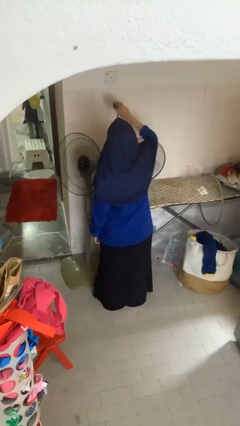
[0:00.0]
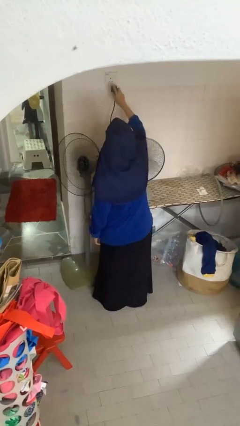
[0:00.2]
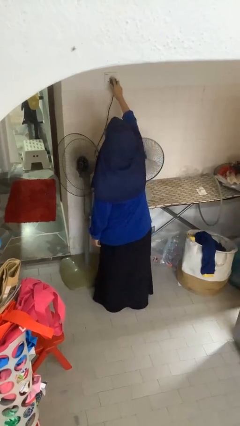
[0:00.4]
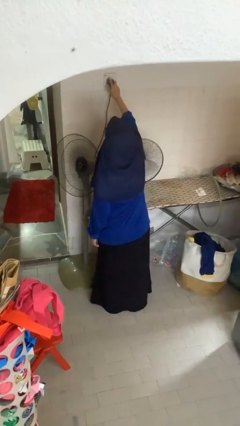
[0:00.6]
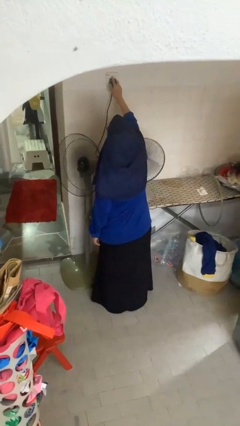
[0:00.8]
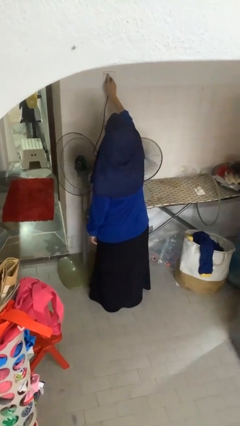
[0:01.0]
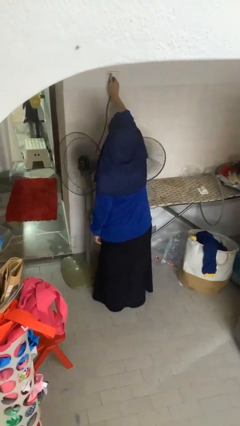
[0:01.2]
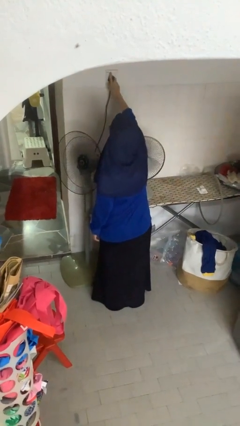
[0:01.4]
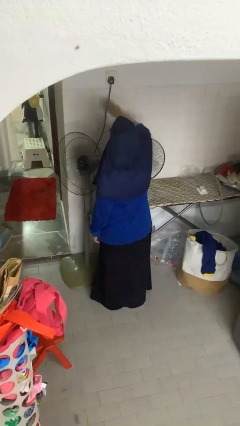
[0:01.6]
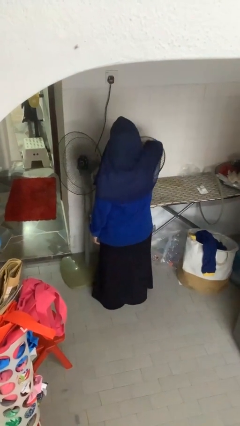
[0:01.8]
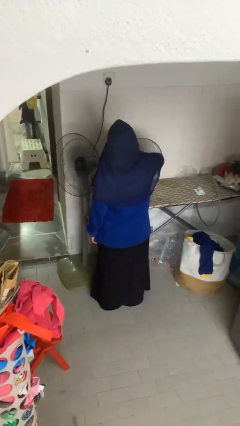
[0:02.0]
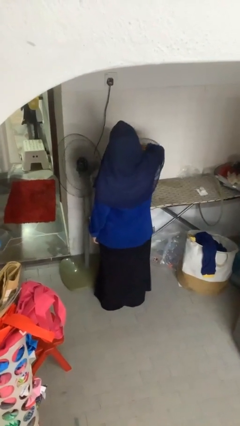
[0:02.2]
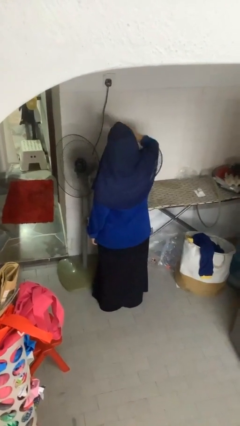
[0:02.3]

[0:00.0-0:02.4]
person plugs into electrical socket

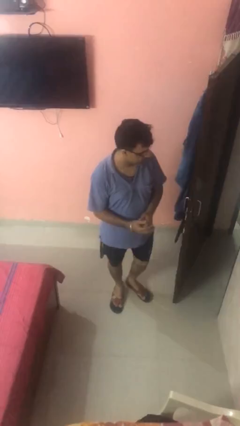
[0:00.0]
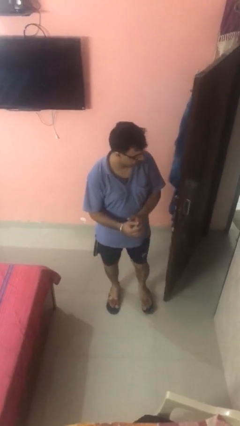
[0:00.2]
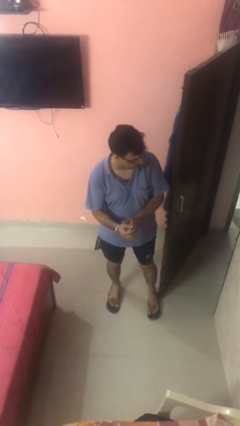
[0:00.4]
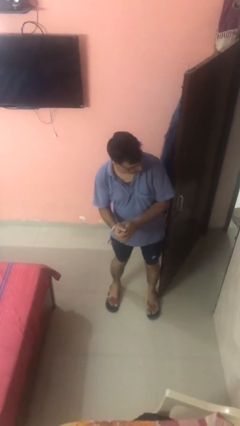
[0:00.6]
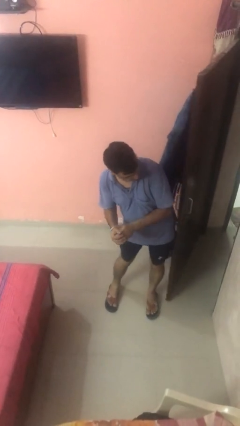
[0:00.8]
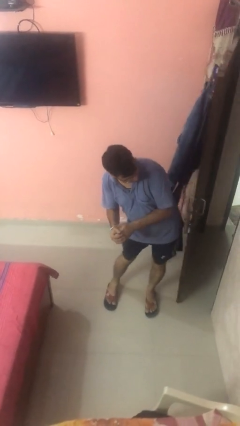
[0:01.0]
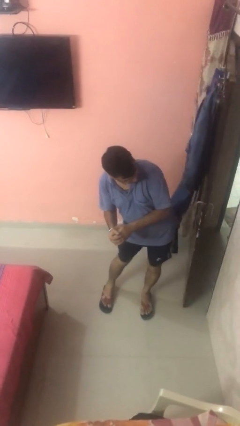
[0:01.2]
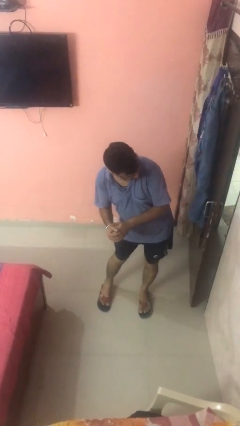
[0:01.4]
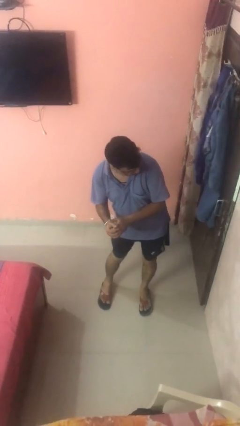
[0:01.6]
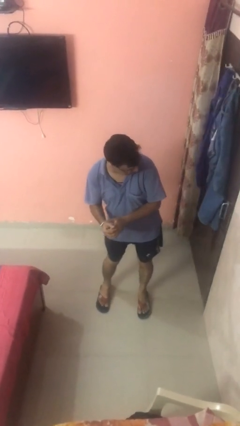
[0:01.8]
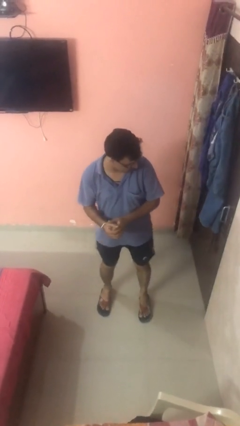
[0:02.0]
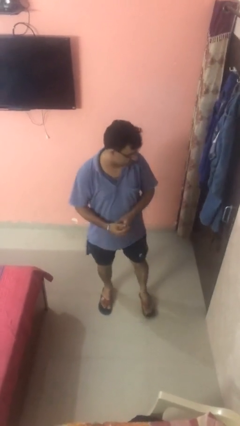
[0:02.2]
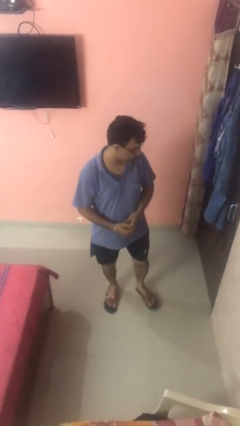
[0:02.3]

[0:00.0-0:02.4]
person closes door with hip

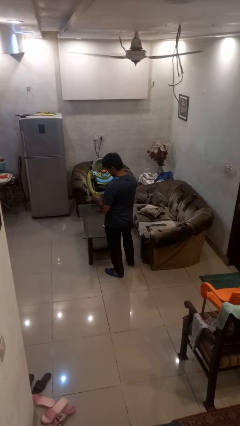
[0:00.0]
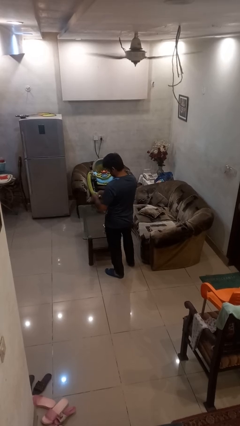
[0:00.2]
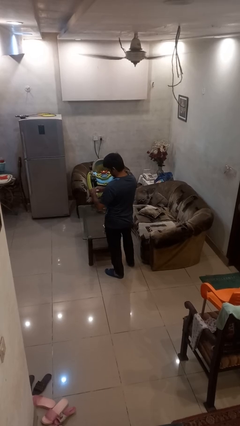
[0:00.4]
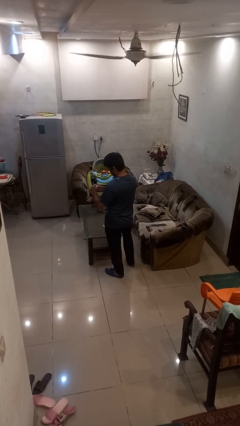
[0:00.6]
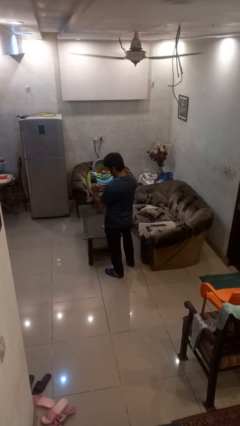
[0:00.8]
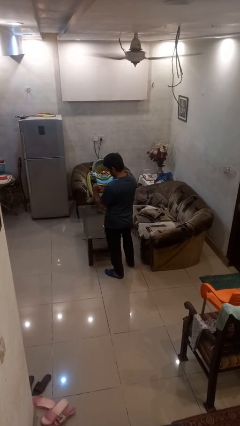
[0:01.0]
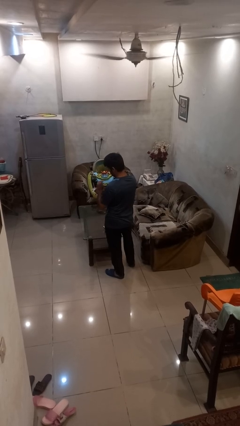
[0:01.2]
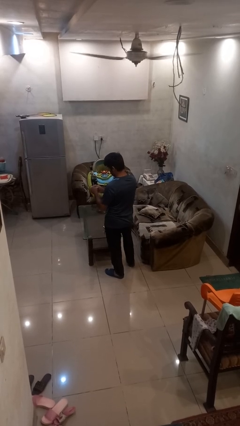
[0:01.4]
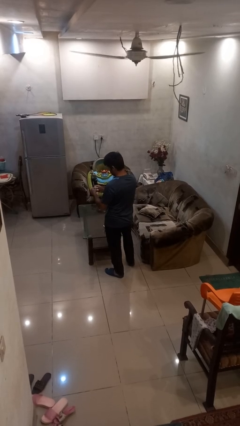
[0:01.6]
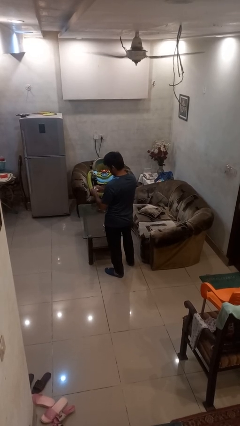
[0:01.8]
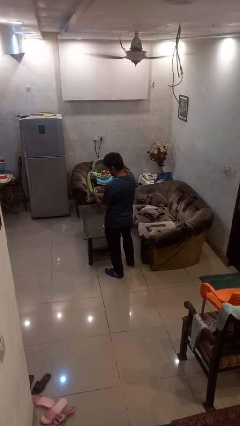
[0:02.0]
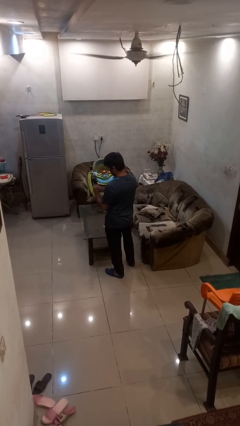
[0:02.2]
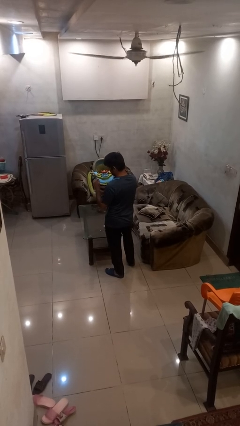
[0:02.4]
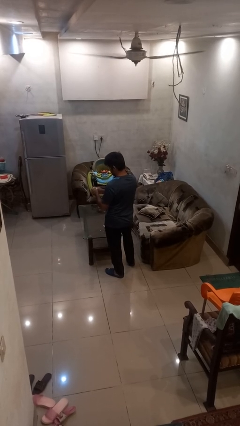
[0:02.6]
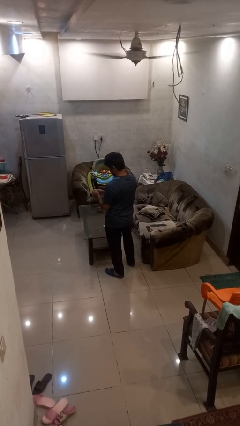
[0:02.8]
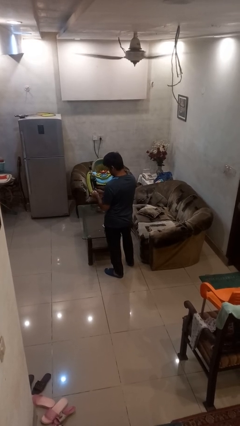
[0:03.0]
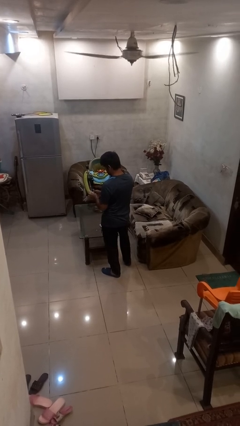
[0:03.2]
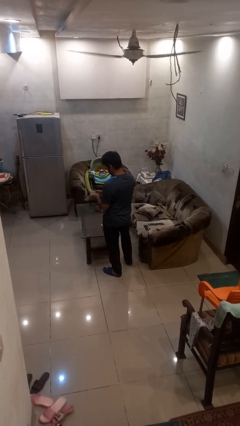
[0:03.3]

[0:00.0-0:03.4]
person tears paper

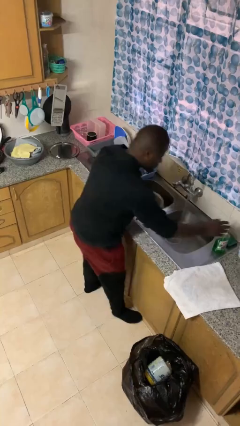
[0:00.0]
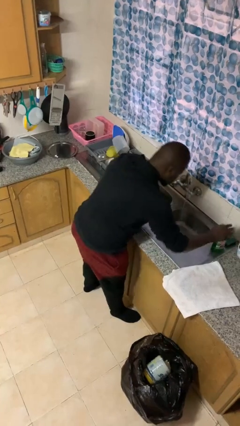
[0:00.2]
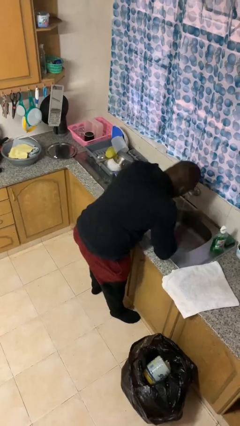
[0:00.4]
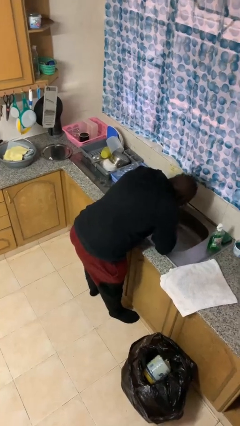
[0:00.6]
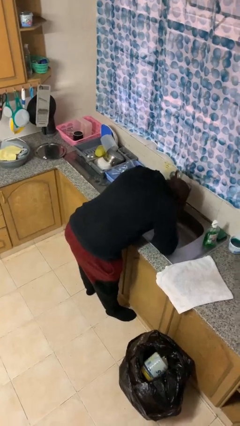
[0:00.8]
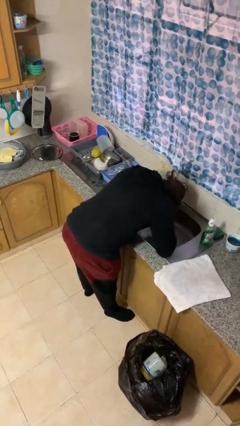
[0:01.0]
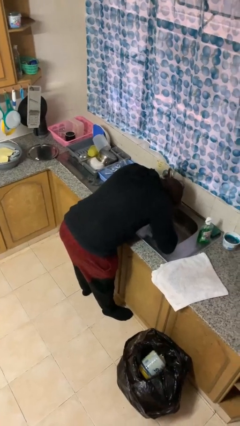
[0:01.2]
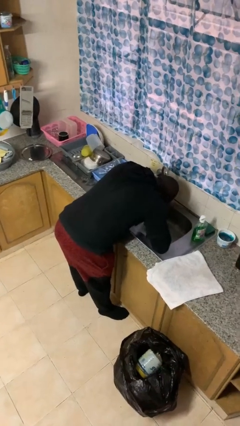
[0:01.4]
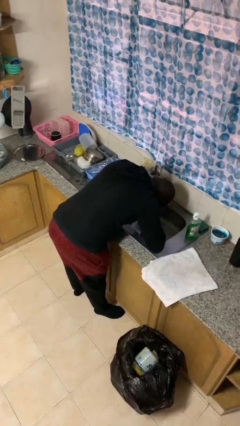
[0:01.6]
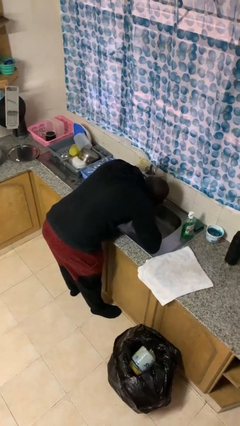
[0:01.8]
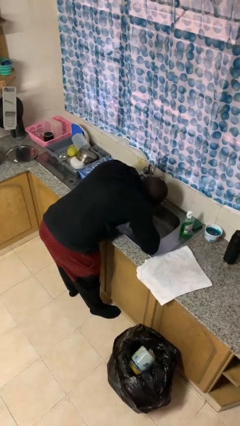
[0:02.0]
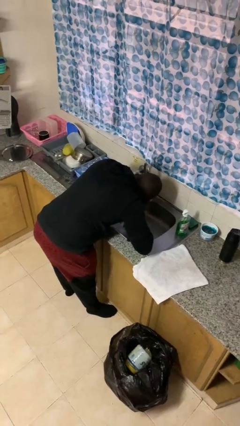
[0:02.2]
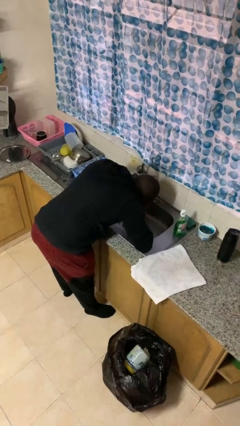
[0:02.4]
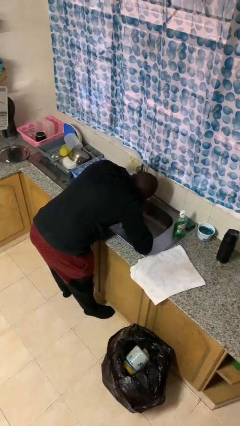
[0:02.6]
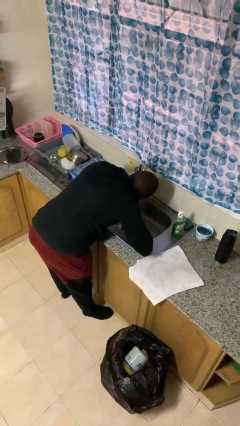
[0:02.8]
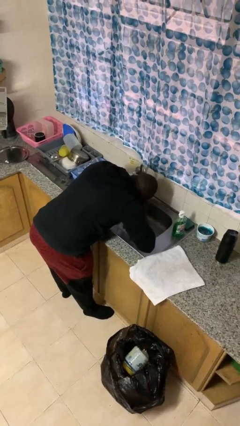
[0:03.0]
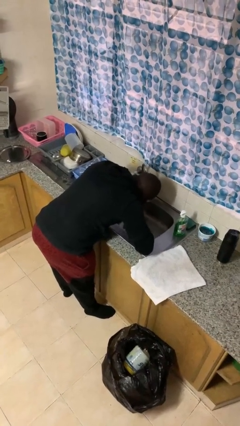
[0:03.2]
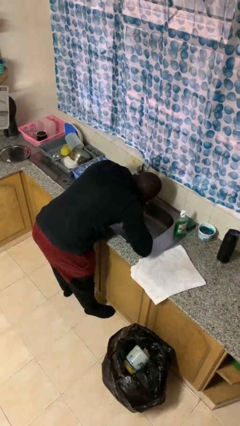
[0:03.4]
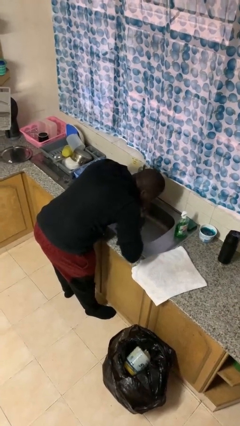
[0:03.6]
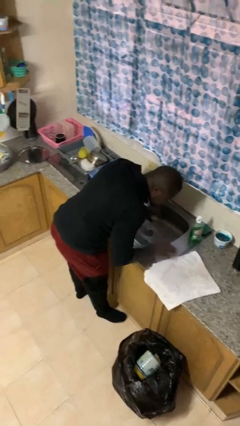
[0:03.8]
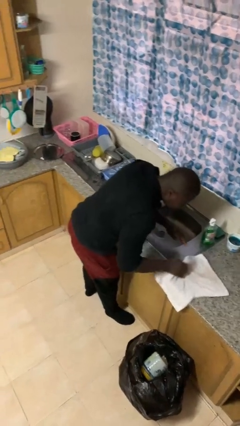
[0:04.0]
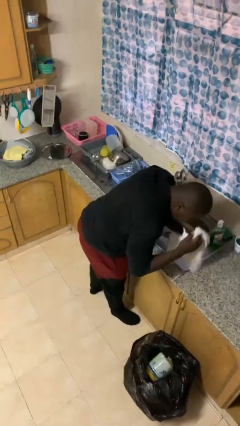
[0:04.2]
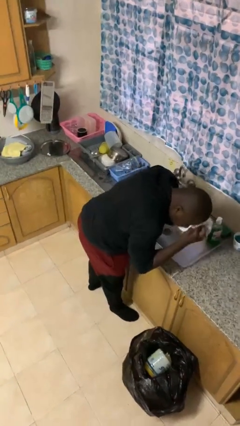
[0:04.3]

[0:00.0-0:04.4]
person washes face

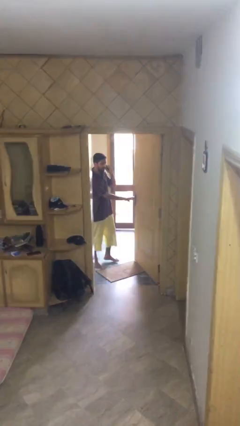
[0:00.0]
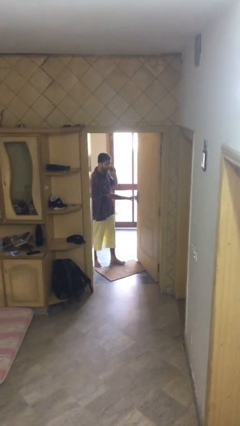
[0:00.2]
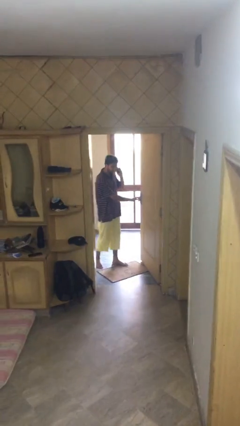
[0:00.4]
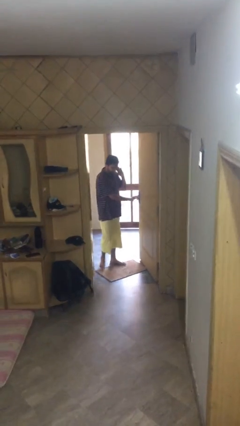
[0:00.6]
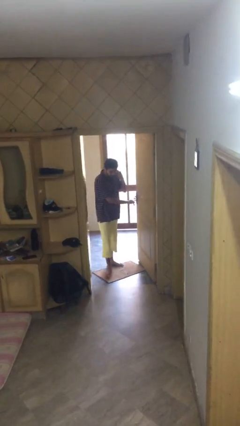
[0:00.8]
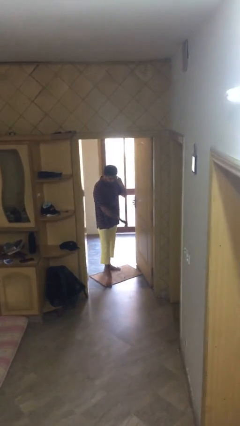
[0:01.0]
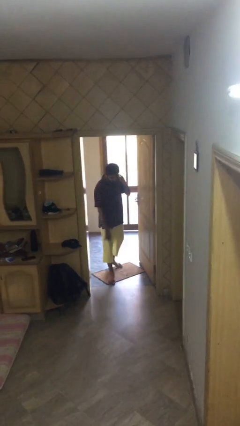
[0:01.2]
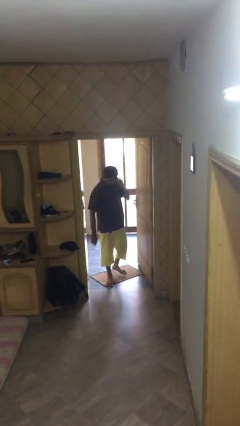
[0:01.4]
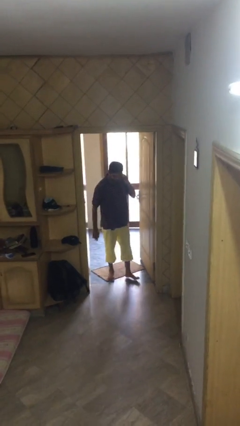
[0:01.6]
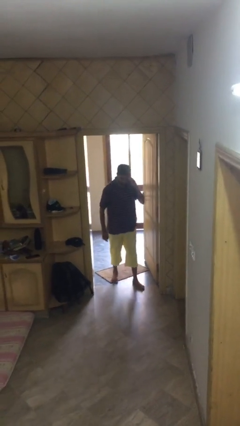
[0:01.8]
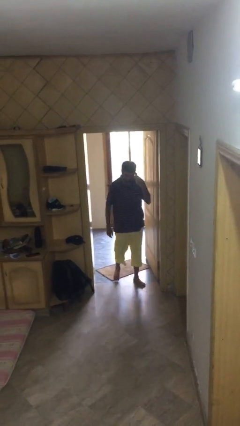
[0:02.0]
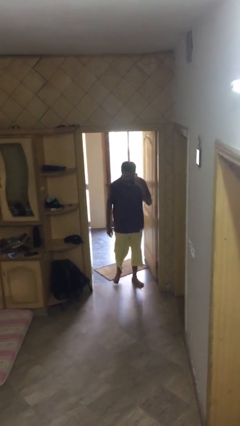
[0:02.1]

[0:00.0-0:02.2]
person enters scene through structure

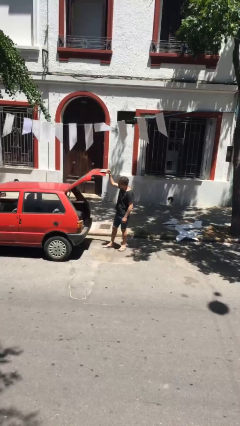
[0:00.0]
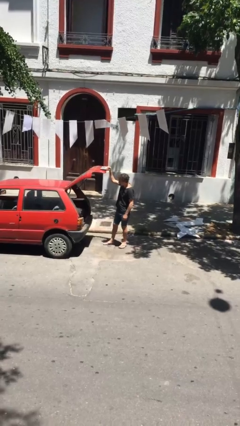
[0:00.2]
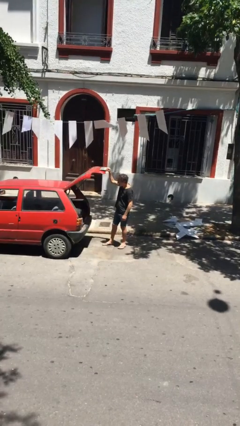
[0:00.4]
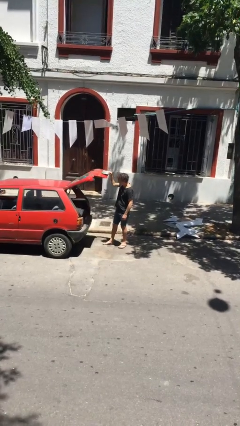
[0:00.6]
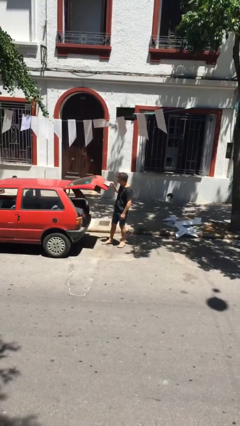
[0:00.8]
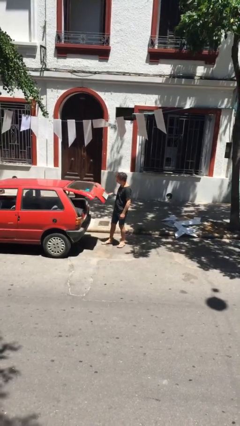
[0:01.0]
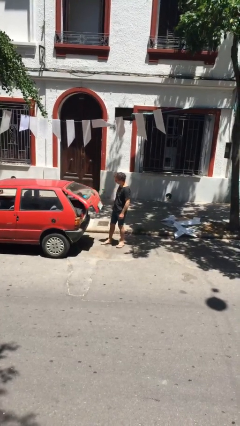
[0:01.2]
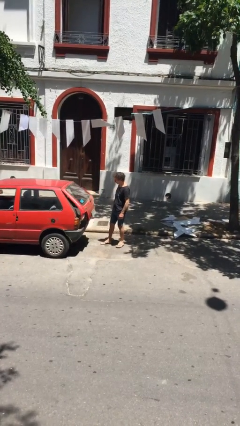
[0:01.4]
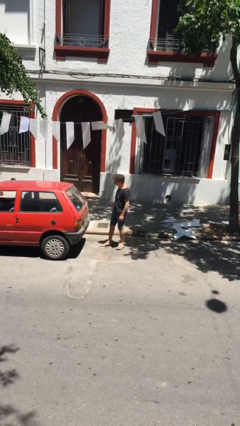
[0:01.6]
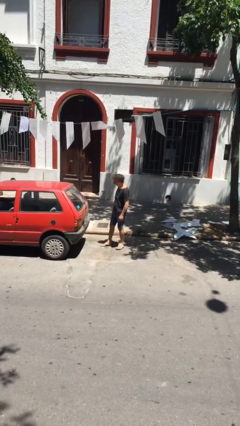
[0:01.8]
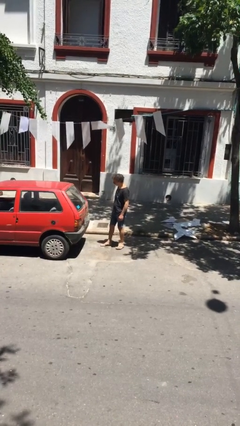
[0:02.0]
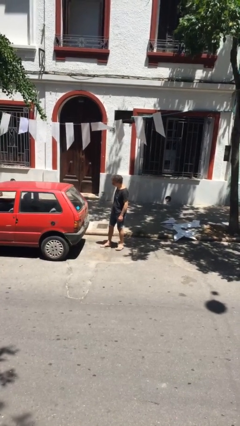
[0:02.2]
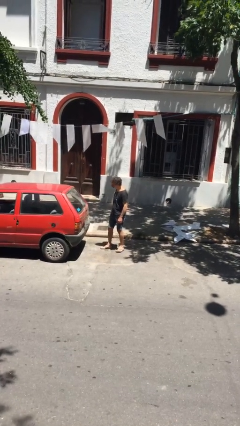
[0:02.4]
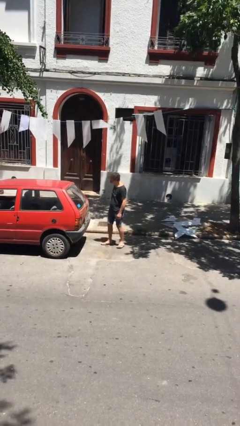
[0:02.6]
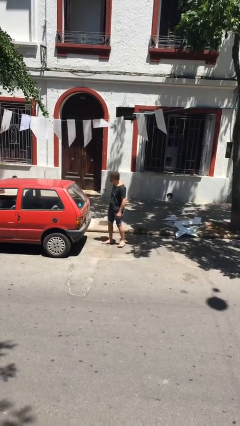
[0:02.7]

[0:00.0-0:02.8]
person closes car trunk
